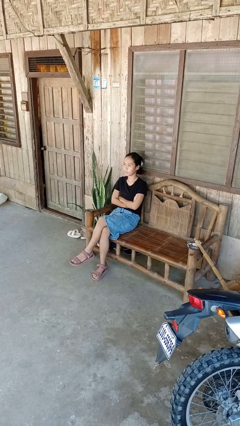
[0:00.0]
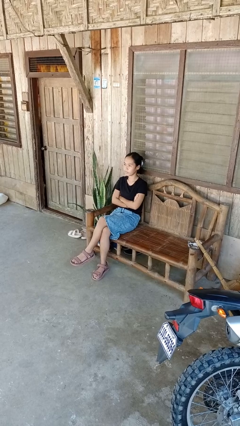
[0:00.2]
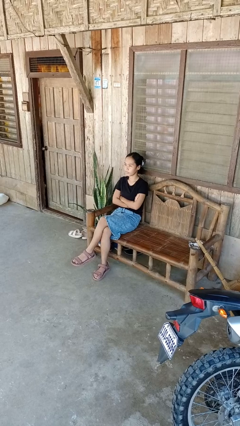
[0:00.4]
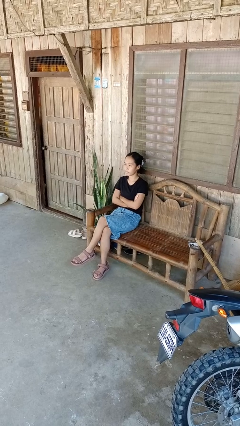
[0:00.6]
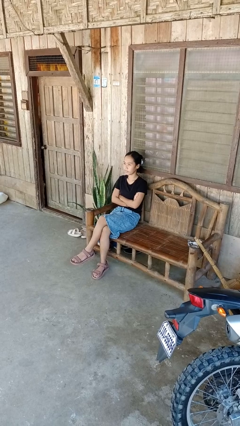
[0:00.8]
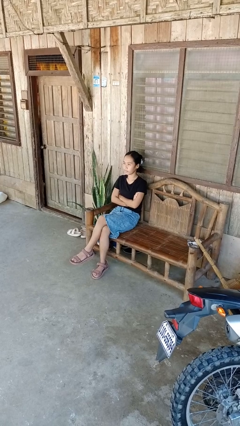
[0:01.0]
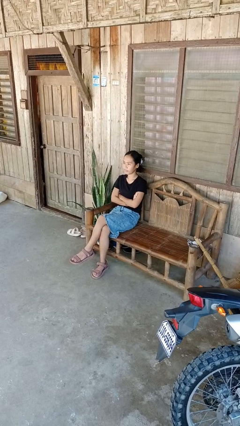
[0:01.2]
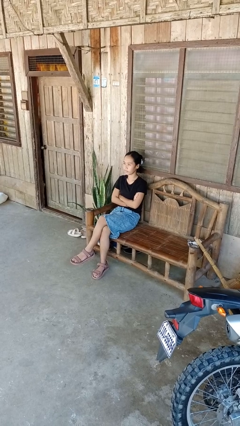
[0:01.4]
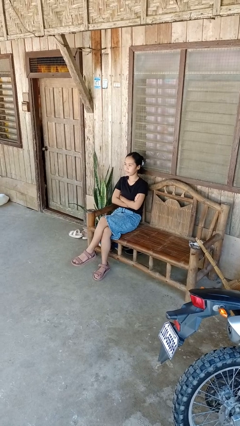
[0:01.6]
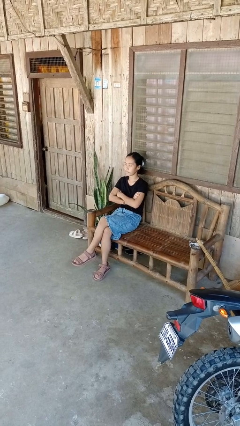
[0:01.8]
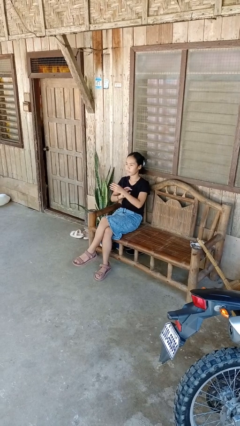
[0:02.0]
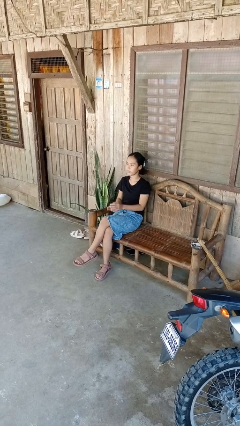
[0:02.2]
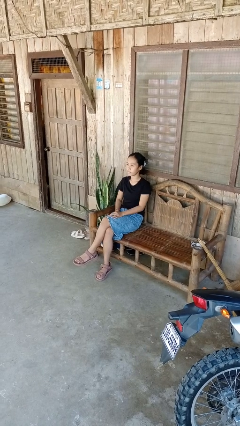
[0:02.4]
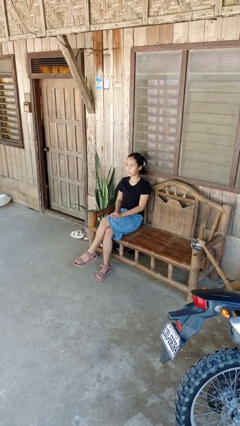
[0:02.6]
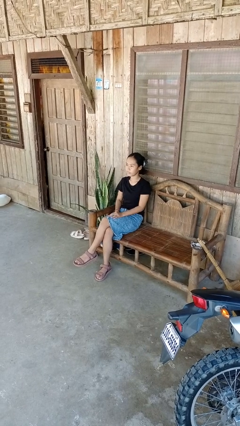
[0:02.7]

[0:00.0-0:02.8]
person crosses arms

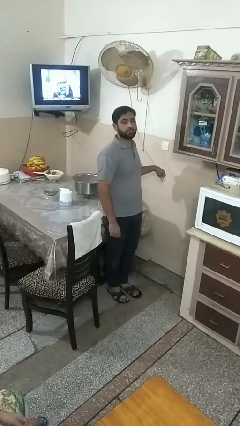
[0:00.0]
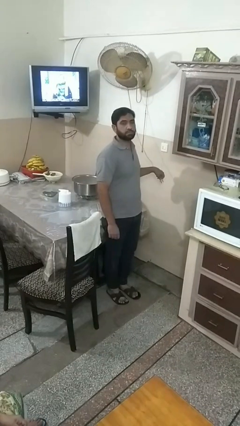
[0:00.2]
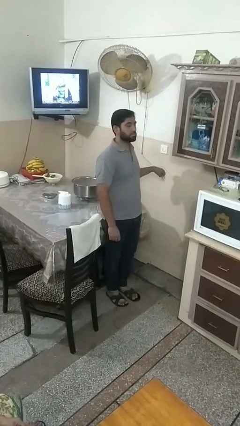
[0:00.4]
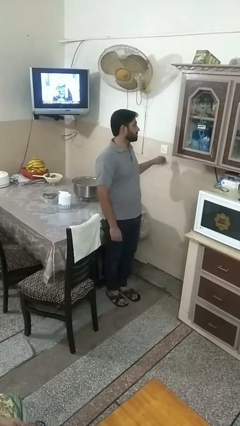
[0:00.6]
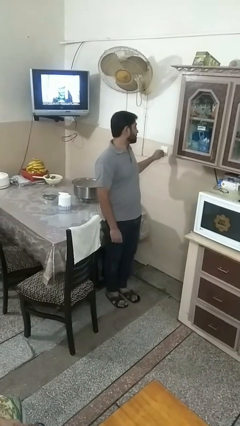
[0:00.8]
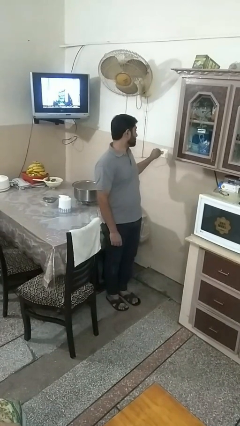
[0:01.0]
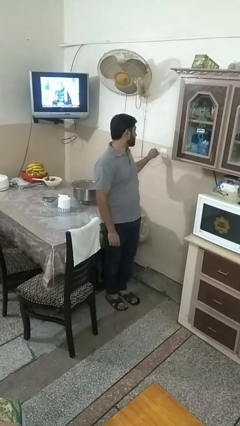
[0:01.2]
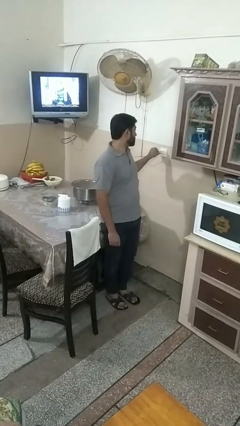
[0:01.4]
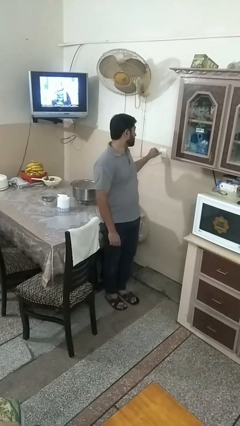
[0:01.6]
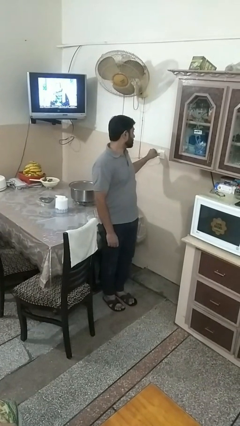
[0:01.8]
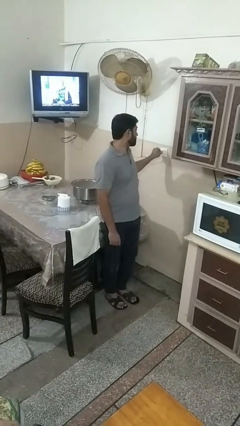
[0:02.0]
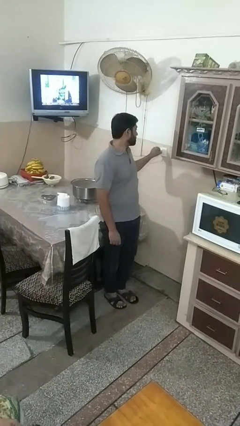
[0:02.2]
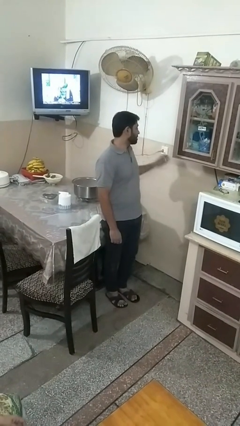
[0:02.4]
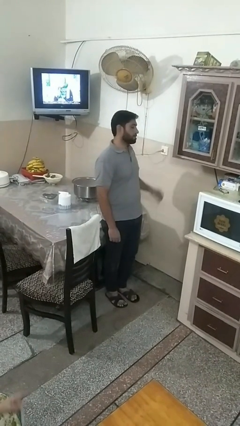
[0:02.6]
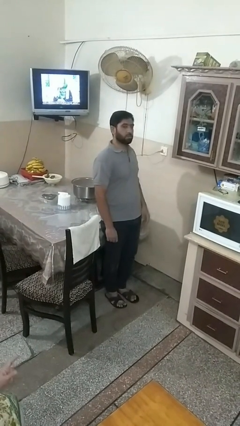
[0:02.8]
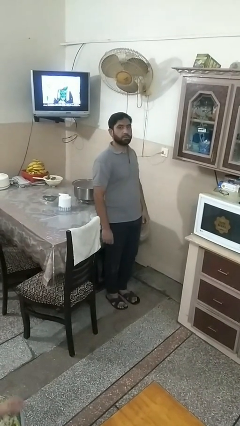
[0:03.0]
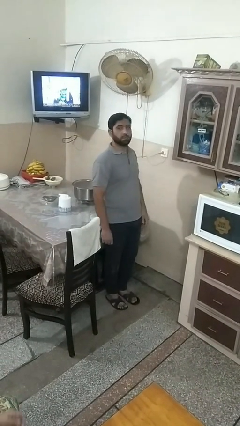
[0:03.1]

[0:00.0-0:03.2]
person plugs into electrical socket

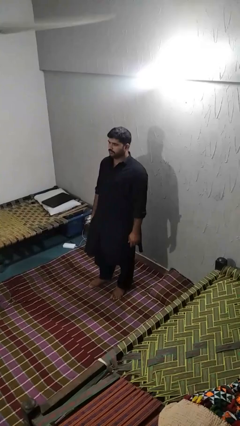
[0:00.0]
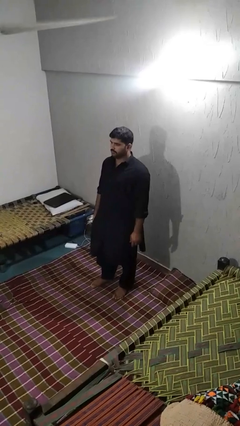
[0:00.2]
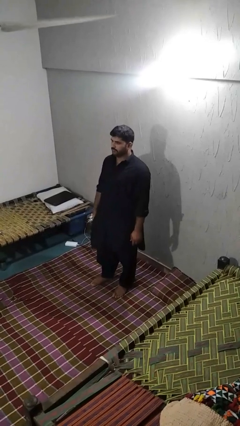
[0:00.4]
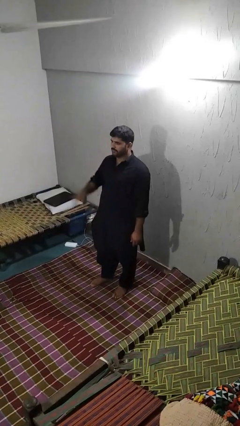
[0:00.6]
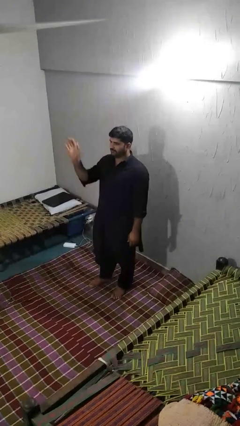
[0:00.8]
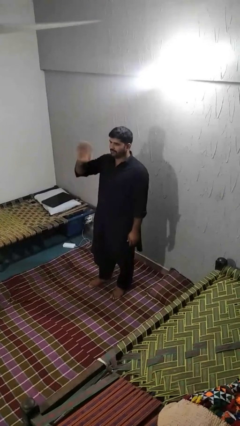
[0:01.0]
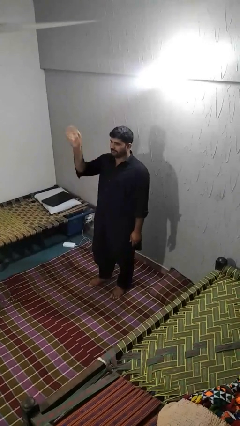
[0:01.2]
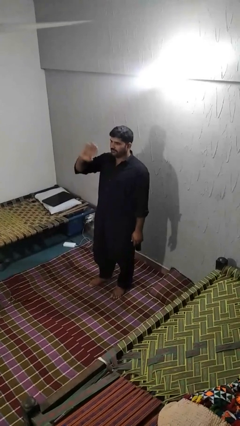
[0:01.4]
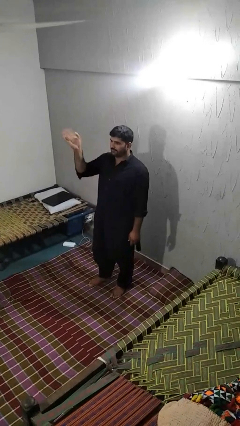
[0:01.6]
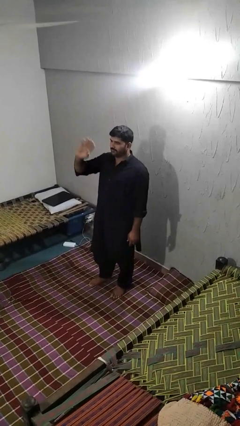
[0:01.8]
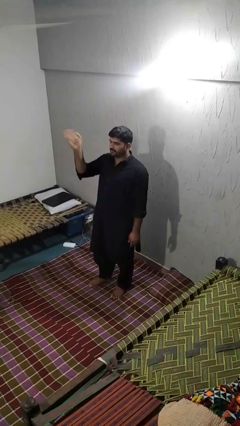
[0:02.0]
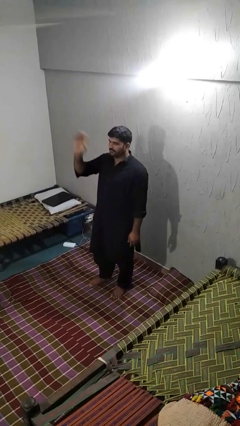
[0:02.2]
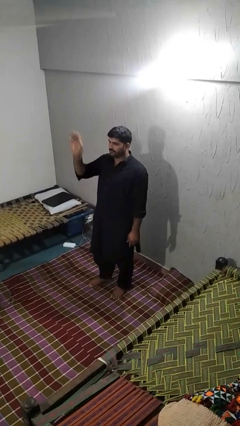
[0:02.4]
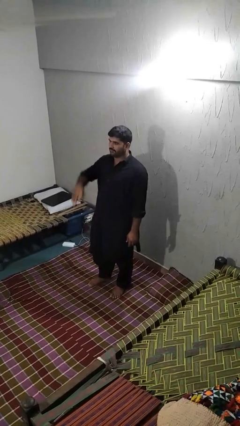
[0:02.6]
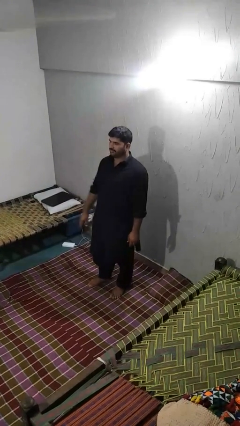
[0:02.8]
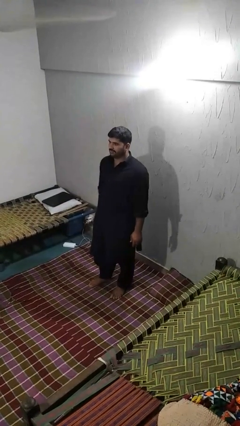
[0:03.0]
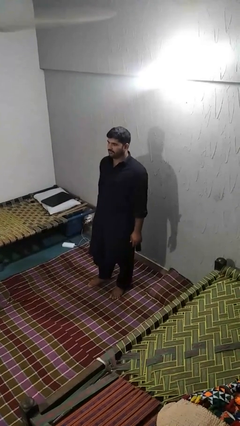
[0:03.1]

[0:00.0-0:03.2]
person waves at person

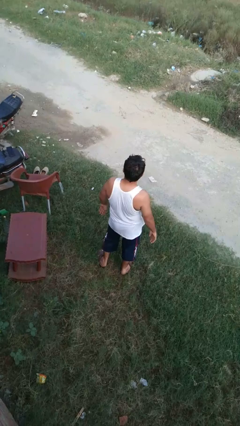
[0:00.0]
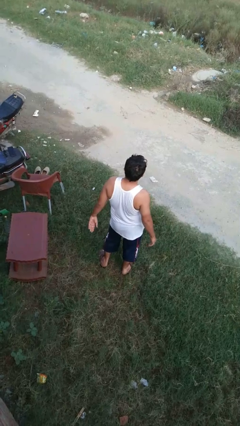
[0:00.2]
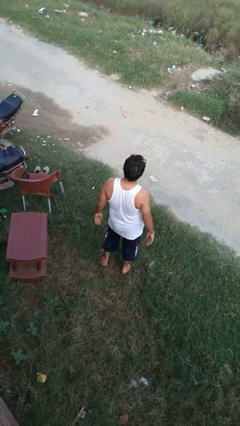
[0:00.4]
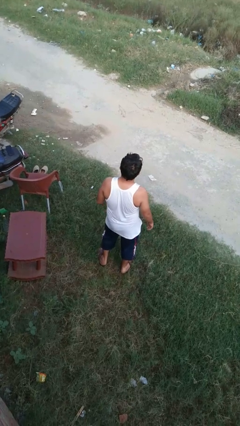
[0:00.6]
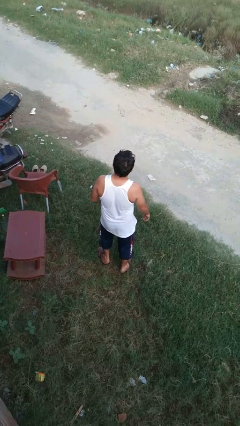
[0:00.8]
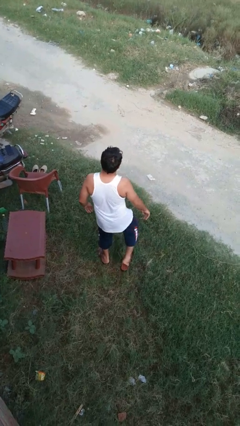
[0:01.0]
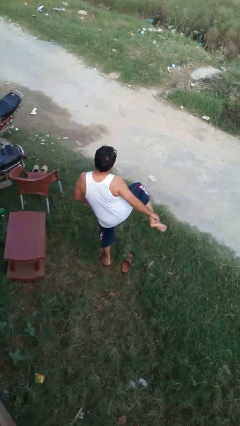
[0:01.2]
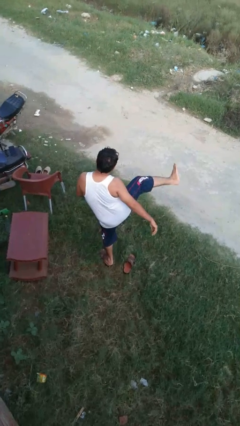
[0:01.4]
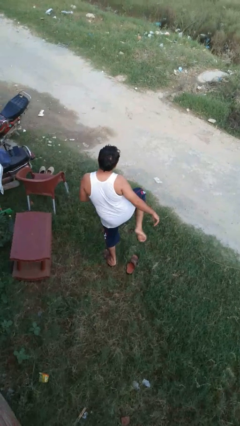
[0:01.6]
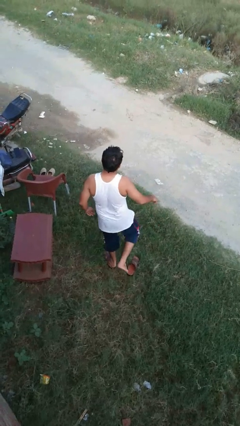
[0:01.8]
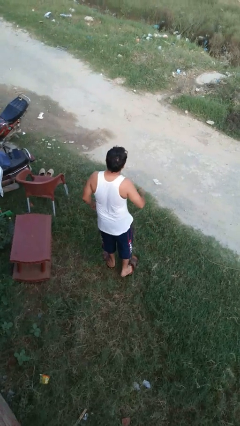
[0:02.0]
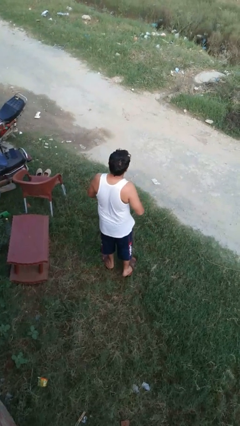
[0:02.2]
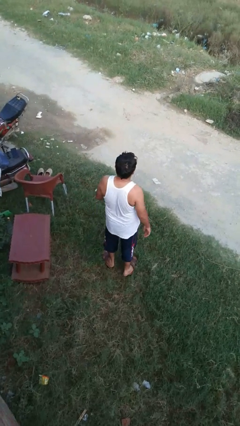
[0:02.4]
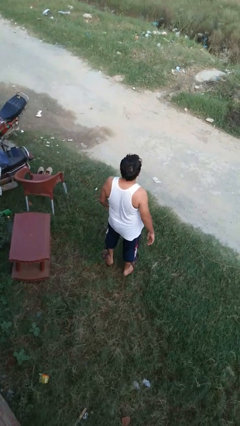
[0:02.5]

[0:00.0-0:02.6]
person karate kicks

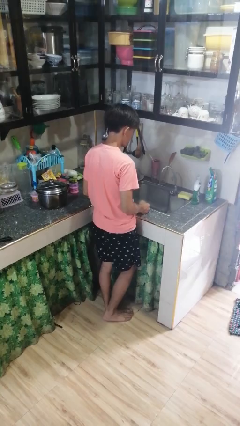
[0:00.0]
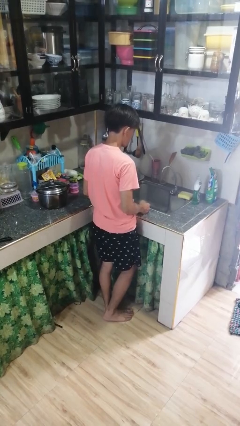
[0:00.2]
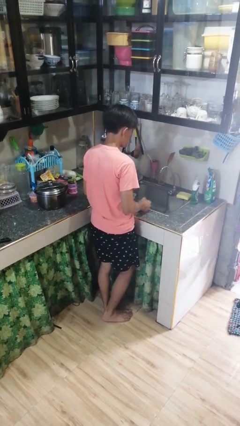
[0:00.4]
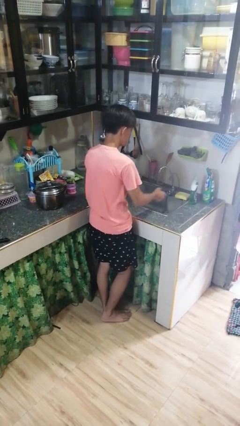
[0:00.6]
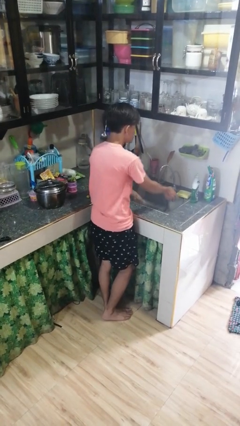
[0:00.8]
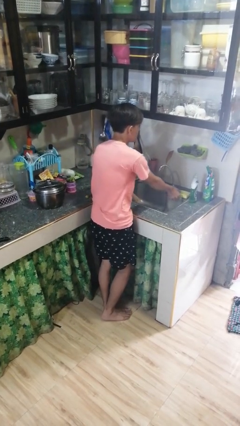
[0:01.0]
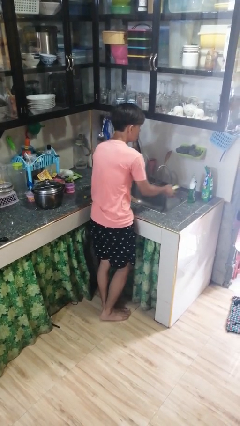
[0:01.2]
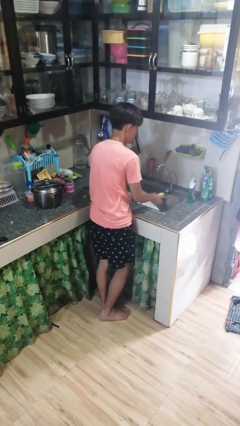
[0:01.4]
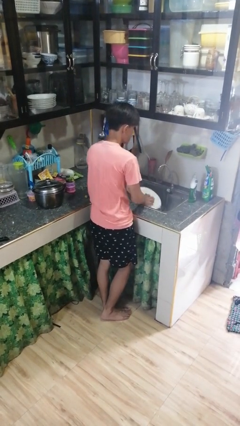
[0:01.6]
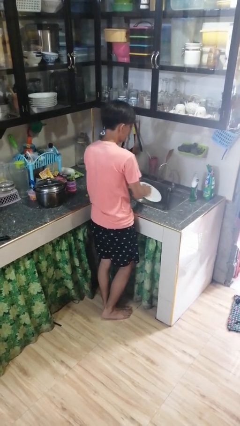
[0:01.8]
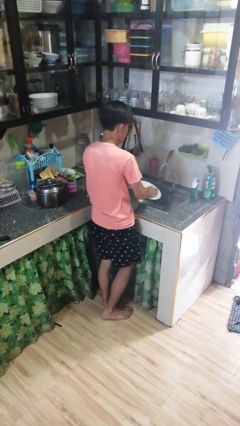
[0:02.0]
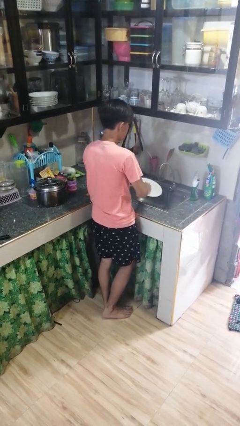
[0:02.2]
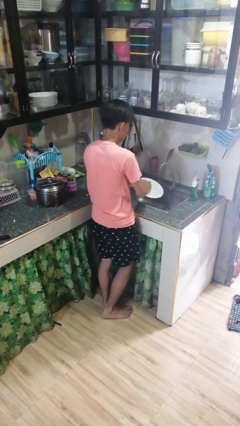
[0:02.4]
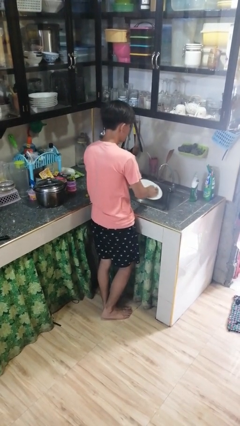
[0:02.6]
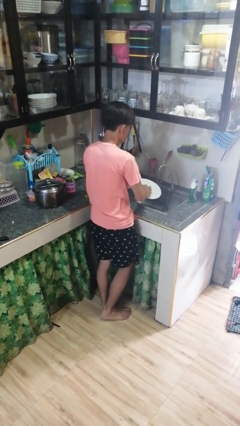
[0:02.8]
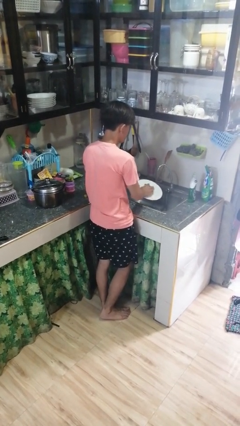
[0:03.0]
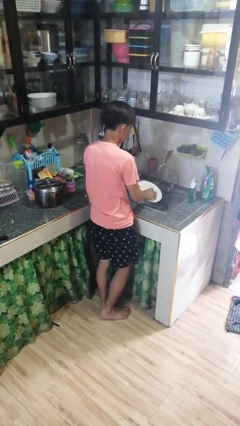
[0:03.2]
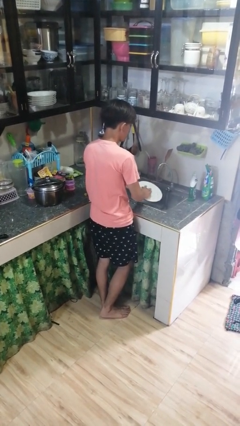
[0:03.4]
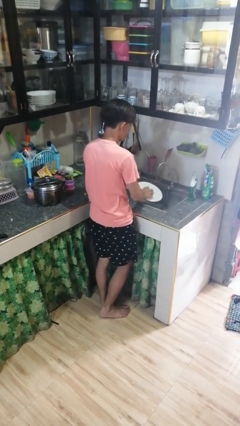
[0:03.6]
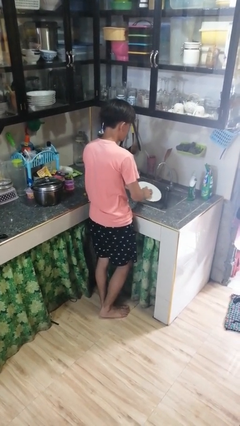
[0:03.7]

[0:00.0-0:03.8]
person washes dish

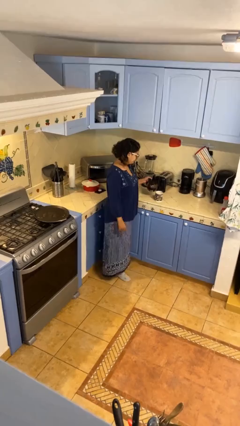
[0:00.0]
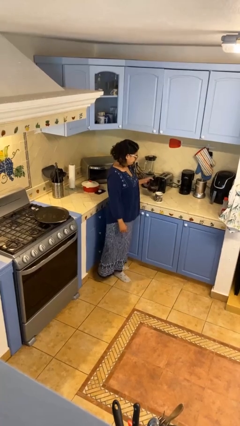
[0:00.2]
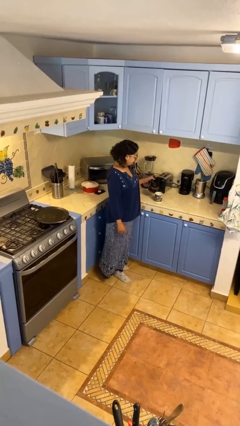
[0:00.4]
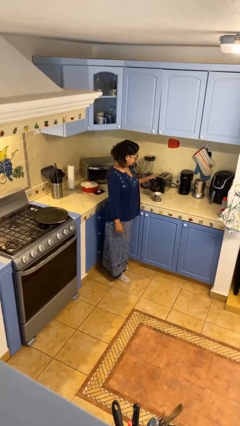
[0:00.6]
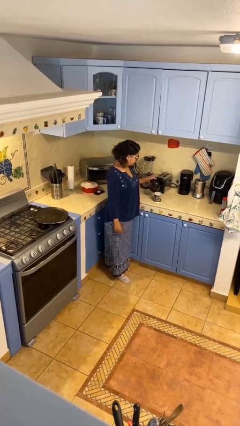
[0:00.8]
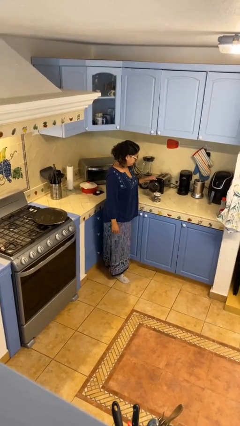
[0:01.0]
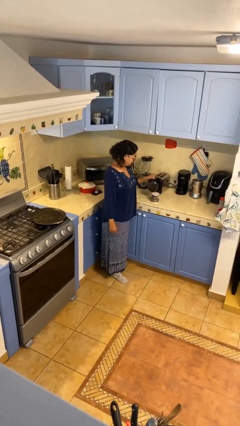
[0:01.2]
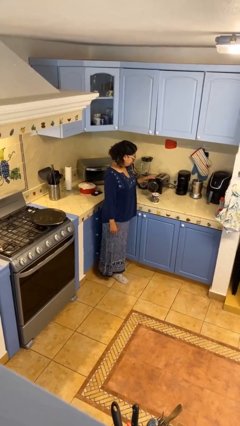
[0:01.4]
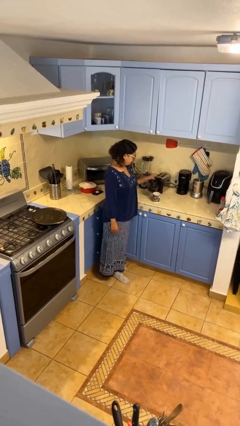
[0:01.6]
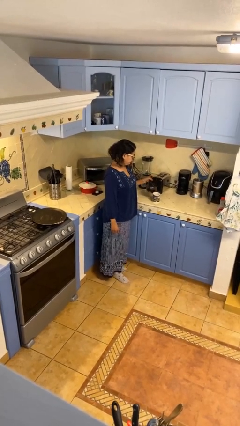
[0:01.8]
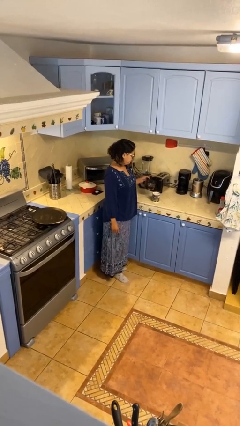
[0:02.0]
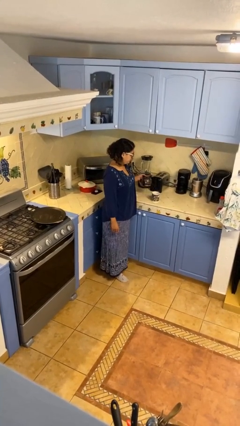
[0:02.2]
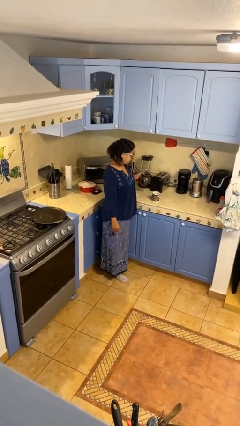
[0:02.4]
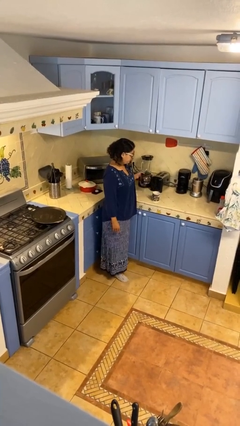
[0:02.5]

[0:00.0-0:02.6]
person pours coffee into mug
